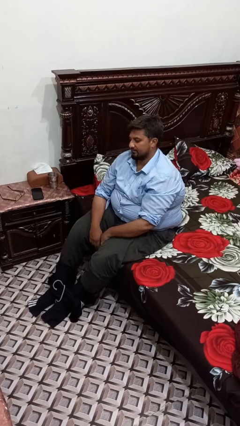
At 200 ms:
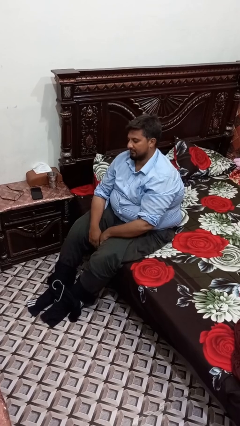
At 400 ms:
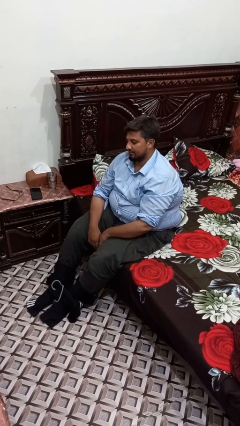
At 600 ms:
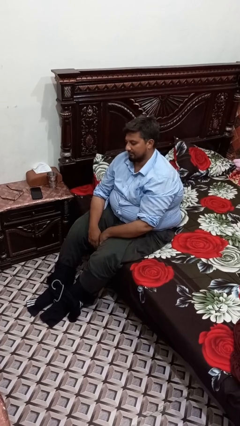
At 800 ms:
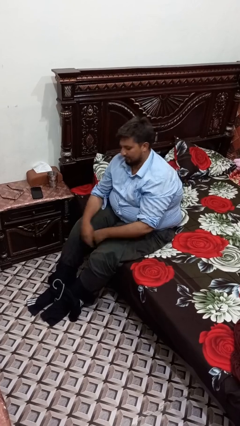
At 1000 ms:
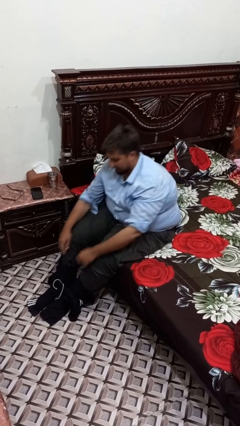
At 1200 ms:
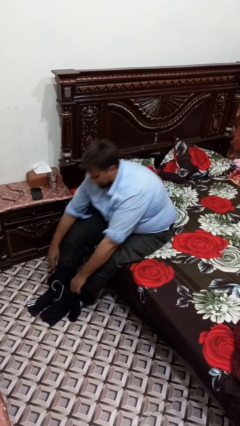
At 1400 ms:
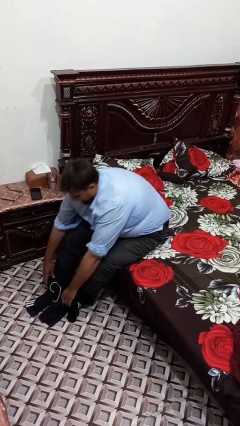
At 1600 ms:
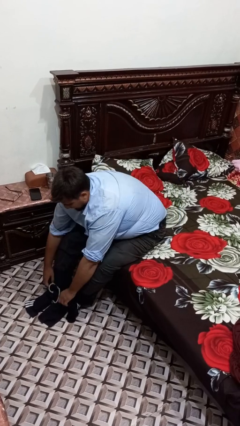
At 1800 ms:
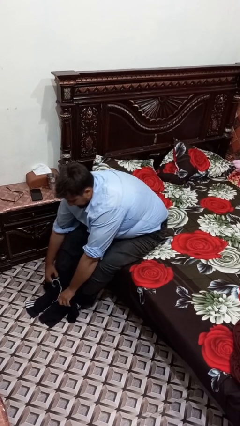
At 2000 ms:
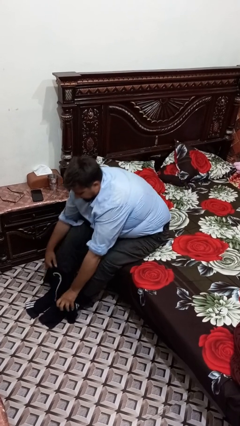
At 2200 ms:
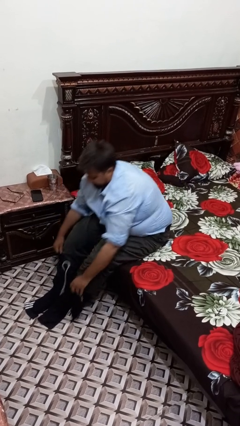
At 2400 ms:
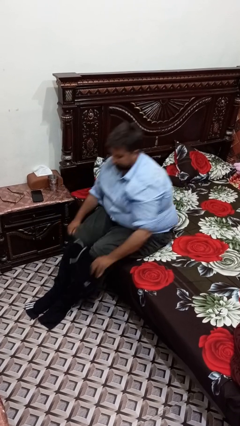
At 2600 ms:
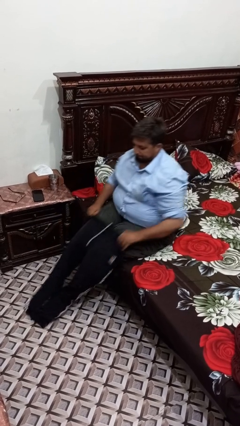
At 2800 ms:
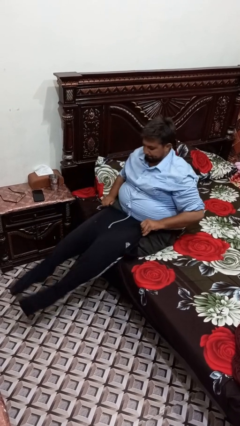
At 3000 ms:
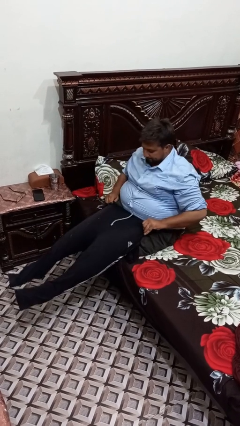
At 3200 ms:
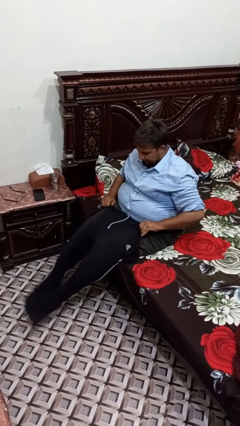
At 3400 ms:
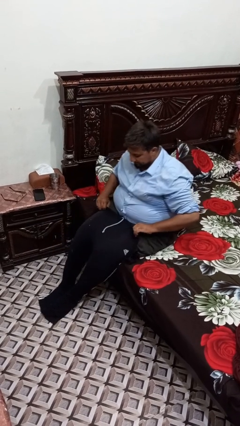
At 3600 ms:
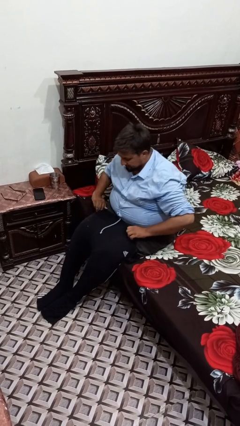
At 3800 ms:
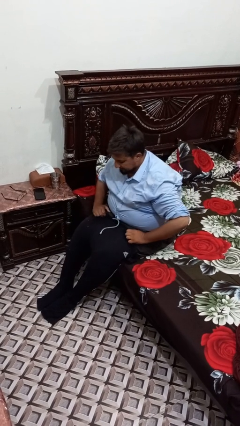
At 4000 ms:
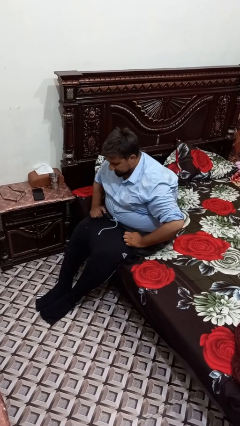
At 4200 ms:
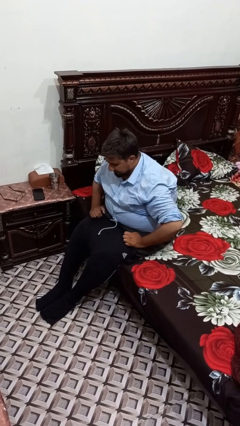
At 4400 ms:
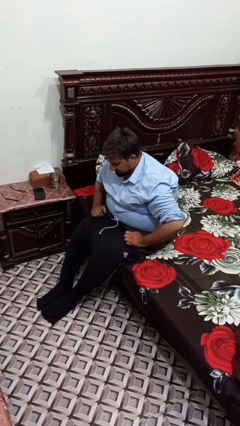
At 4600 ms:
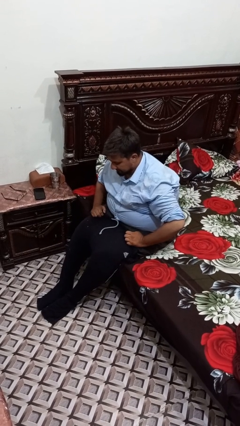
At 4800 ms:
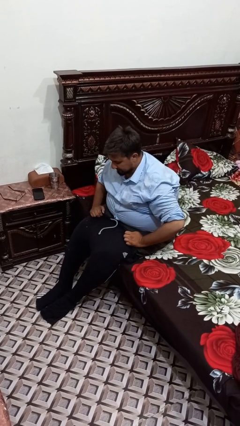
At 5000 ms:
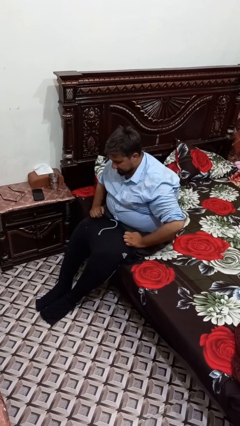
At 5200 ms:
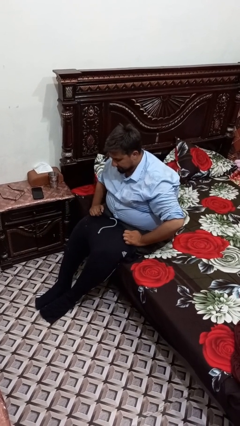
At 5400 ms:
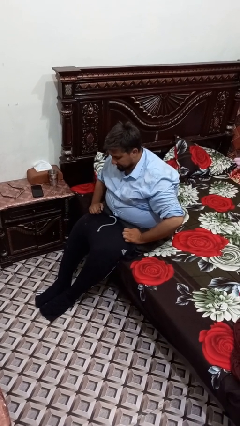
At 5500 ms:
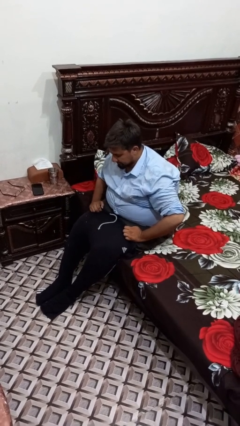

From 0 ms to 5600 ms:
person puts on pants

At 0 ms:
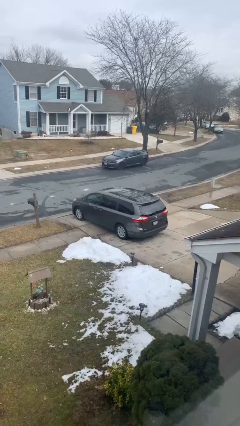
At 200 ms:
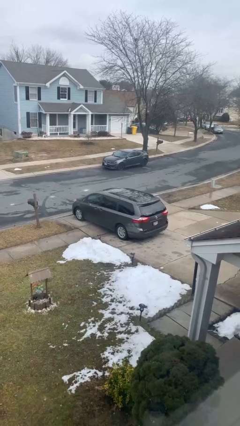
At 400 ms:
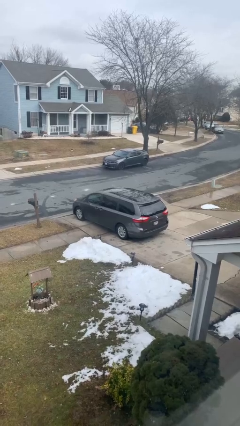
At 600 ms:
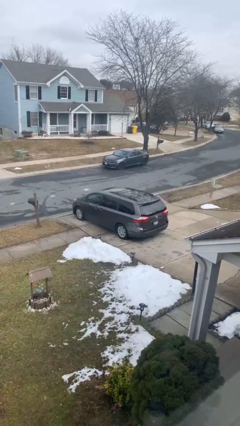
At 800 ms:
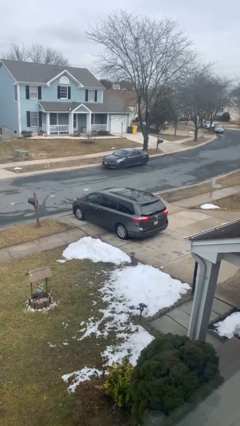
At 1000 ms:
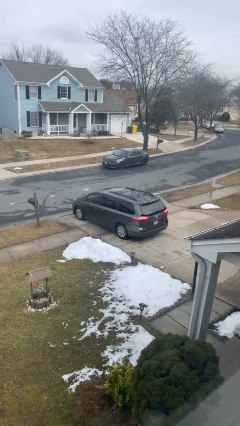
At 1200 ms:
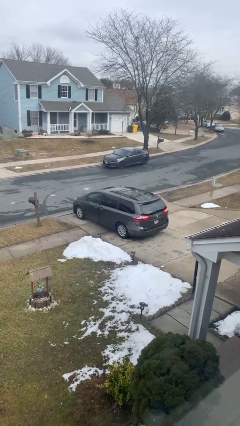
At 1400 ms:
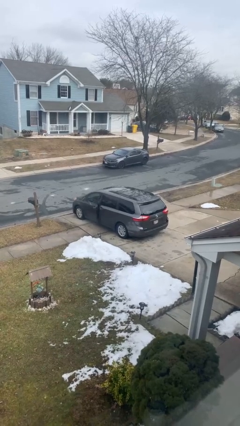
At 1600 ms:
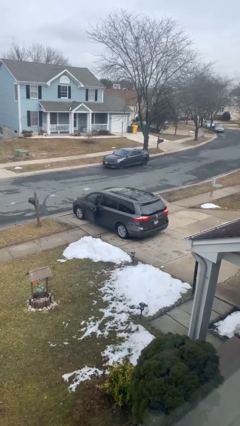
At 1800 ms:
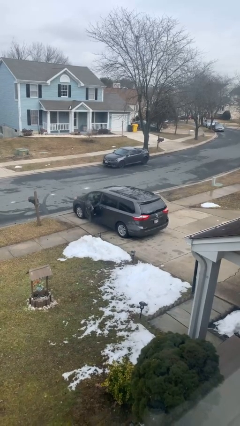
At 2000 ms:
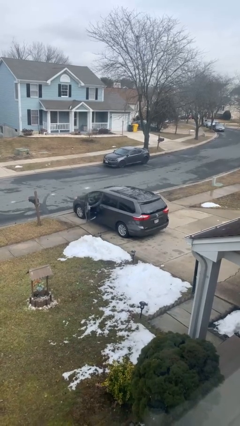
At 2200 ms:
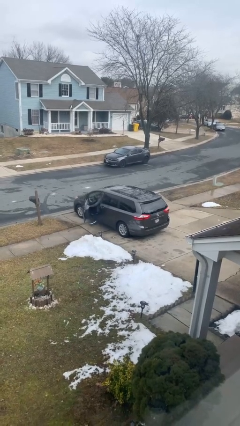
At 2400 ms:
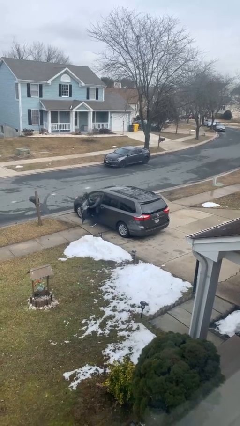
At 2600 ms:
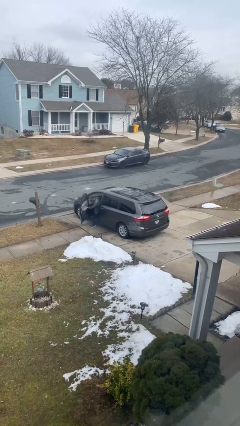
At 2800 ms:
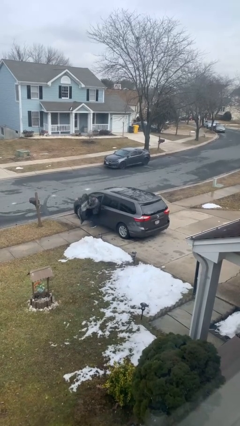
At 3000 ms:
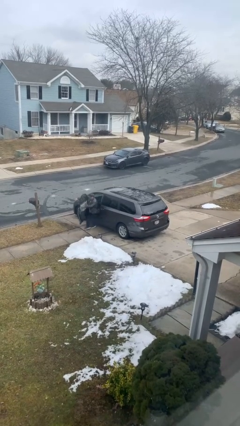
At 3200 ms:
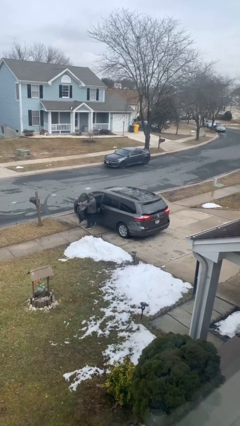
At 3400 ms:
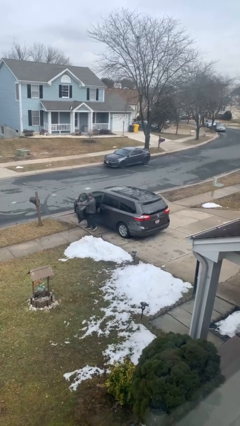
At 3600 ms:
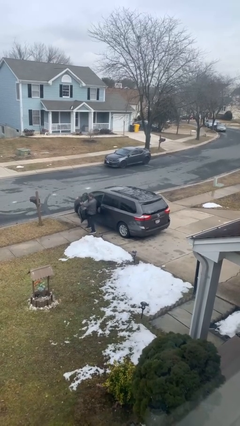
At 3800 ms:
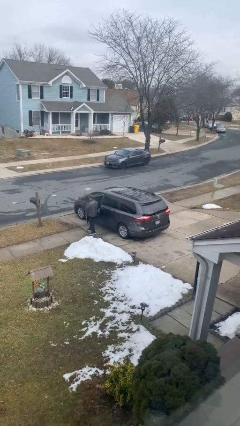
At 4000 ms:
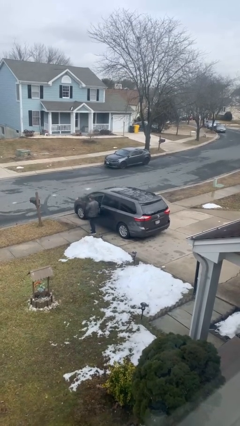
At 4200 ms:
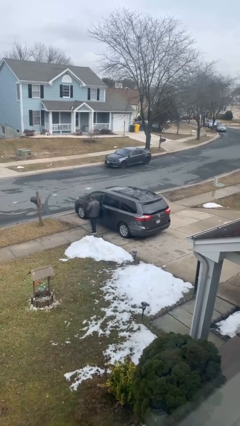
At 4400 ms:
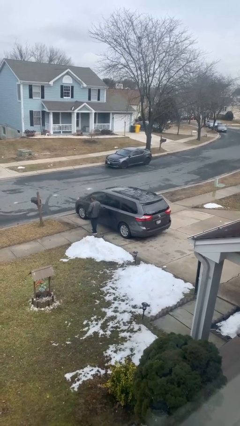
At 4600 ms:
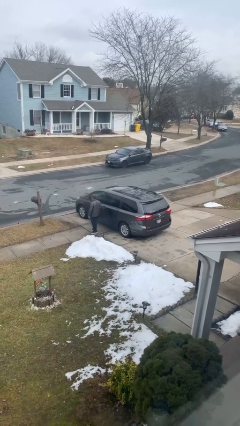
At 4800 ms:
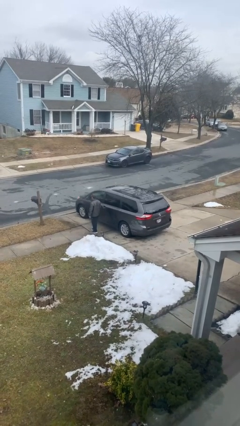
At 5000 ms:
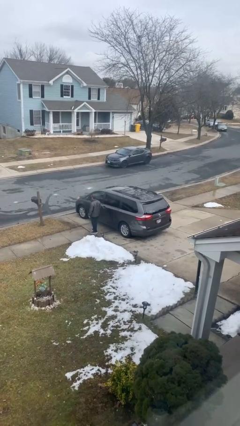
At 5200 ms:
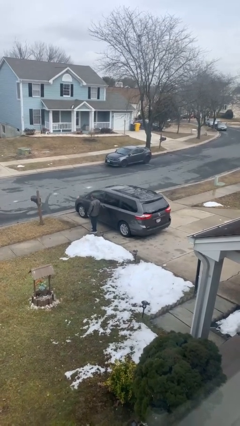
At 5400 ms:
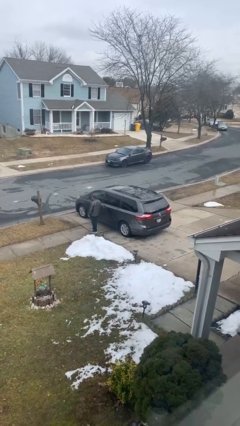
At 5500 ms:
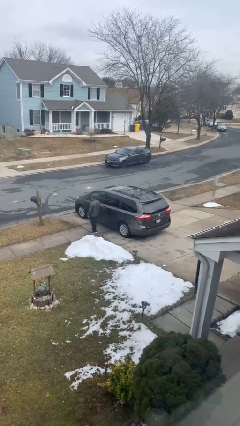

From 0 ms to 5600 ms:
car drops off person

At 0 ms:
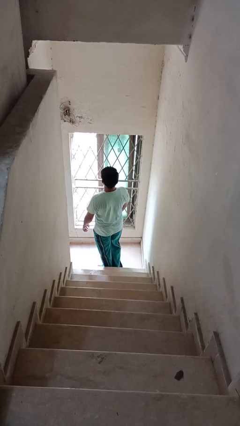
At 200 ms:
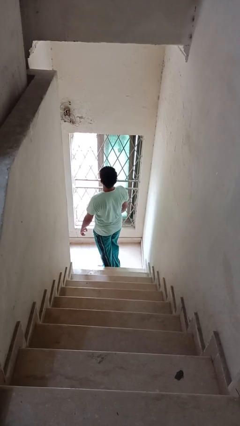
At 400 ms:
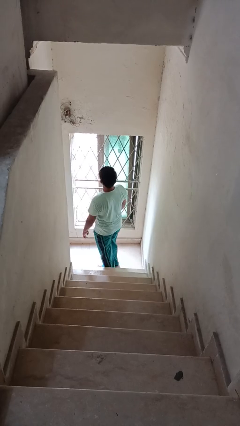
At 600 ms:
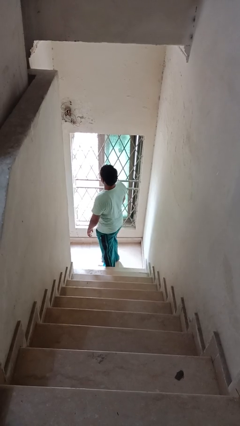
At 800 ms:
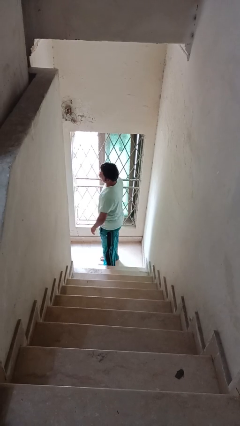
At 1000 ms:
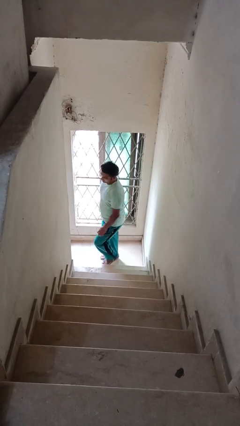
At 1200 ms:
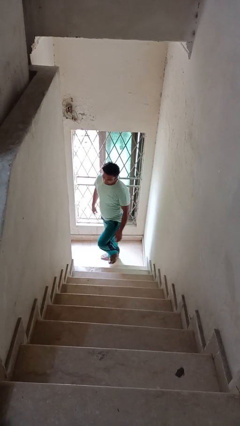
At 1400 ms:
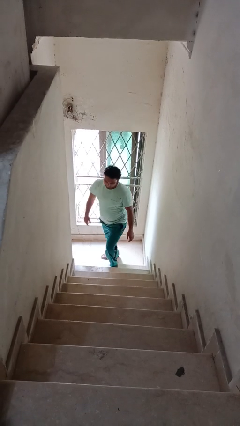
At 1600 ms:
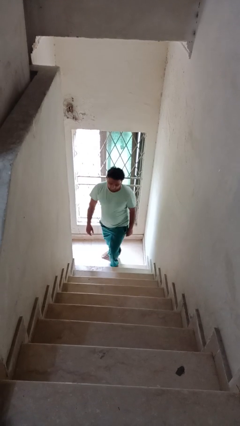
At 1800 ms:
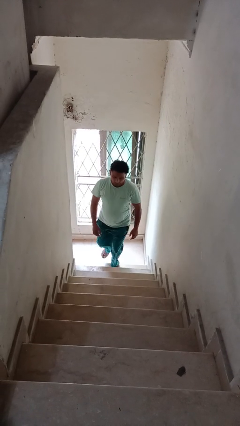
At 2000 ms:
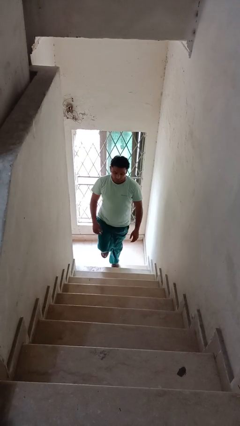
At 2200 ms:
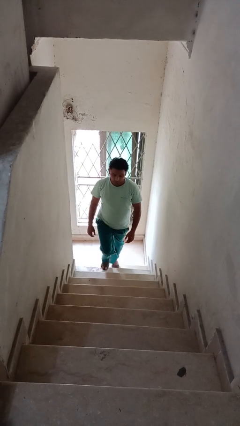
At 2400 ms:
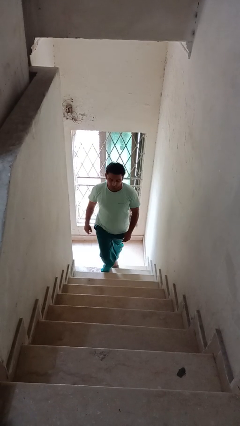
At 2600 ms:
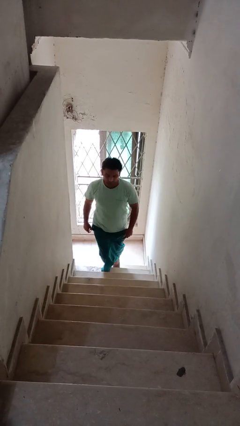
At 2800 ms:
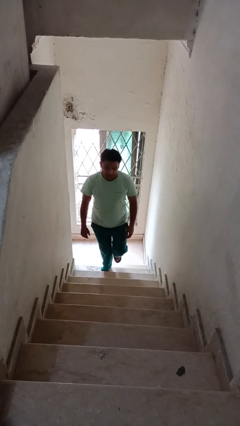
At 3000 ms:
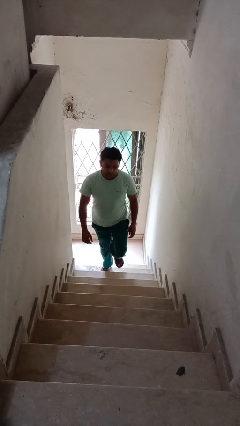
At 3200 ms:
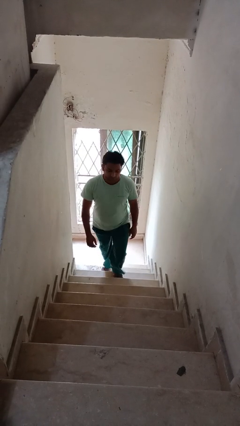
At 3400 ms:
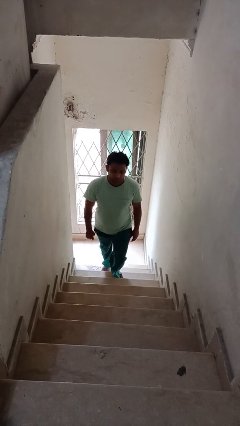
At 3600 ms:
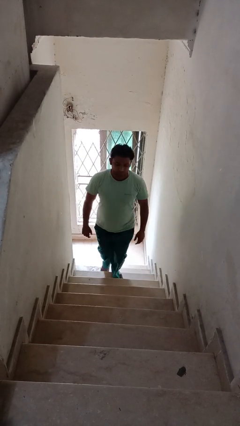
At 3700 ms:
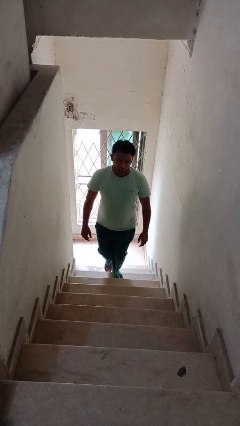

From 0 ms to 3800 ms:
person climbs up stairs

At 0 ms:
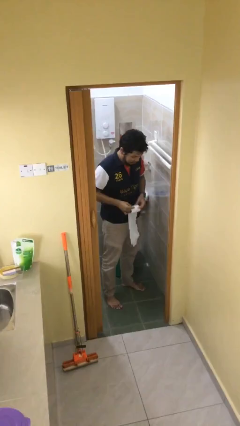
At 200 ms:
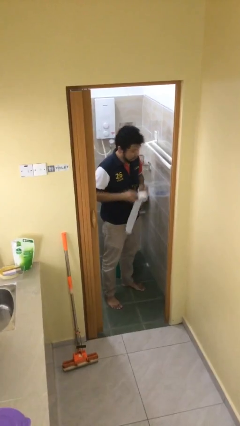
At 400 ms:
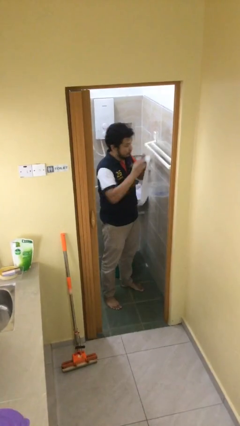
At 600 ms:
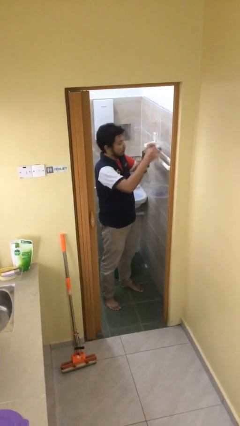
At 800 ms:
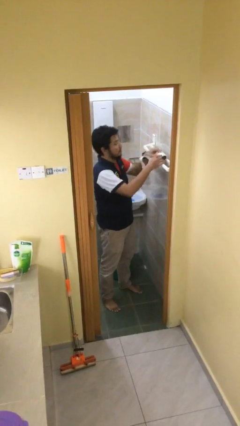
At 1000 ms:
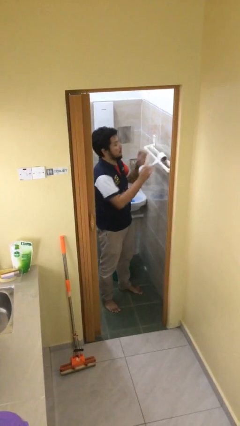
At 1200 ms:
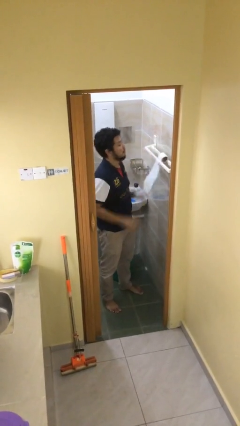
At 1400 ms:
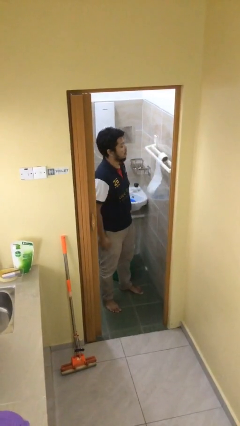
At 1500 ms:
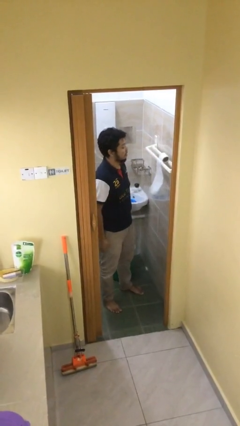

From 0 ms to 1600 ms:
person puts down object on countertop

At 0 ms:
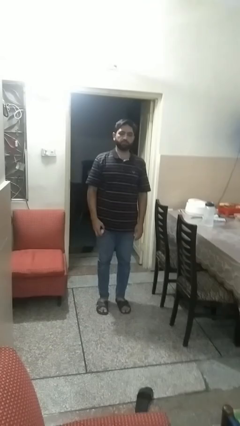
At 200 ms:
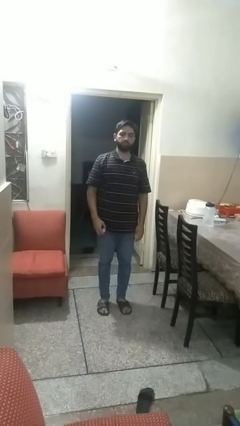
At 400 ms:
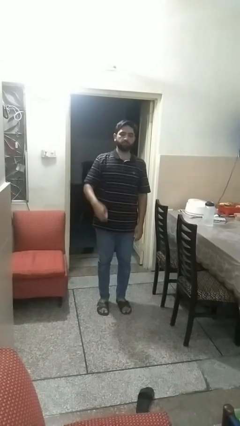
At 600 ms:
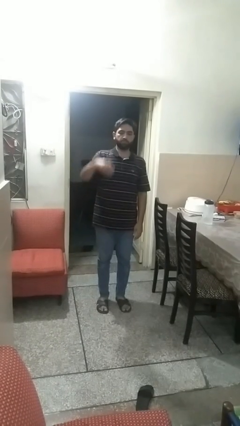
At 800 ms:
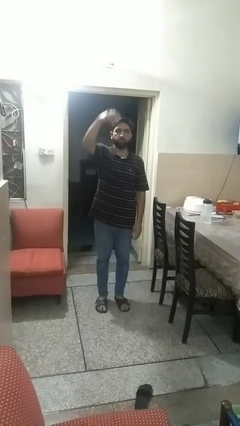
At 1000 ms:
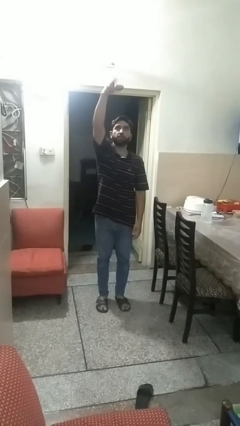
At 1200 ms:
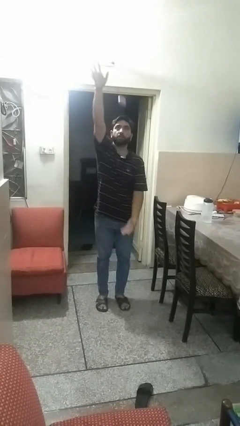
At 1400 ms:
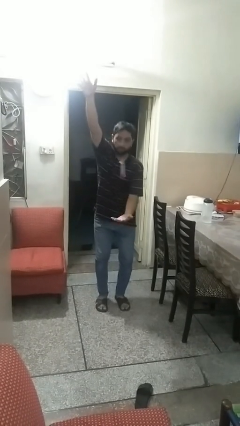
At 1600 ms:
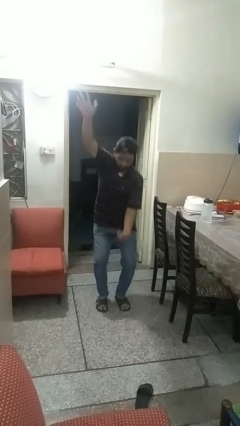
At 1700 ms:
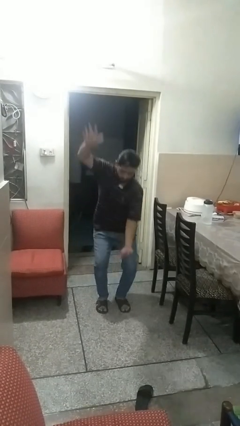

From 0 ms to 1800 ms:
person drops object
